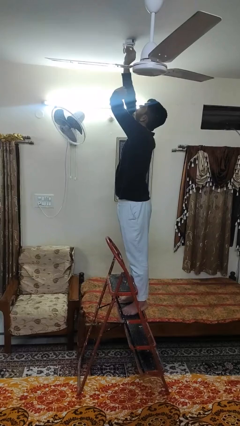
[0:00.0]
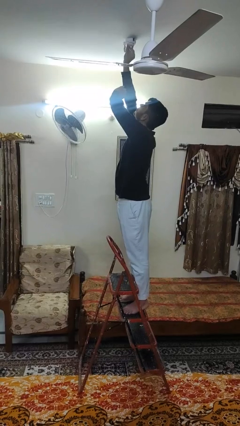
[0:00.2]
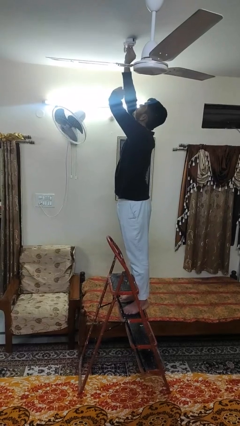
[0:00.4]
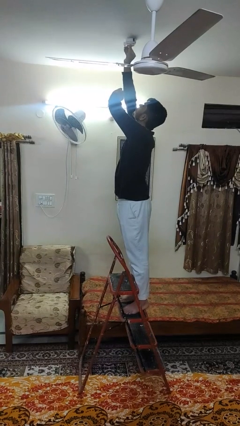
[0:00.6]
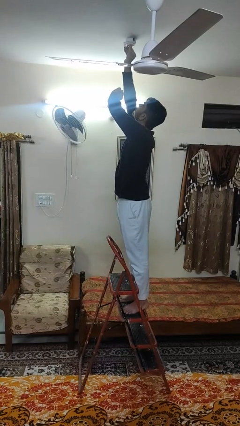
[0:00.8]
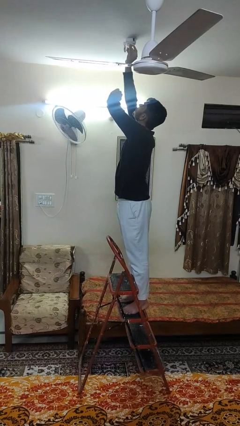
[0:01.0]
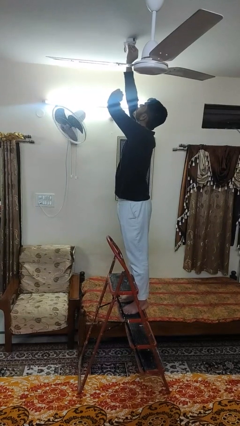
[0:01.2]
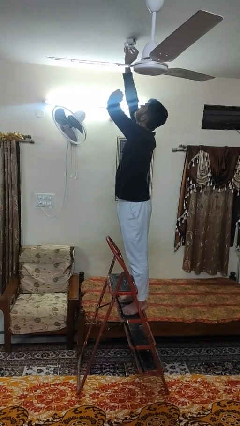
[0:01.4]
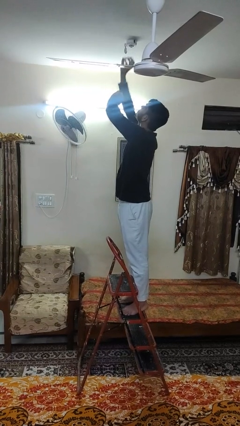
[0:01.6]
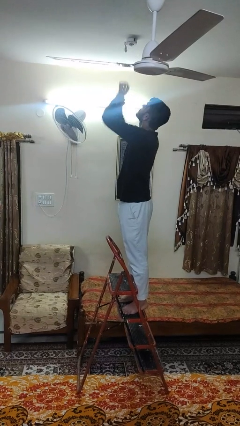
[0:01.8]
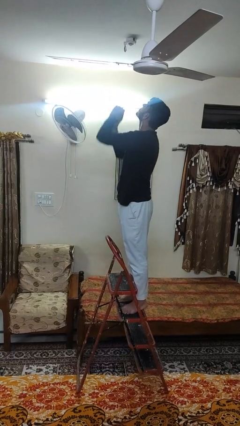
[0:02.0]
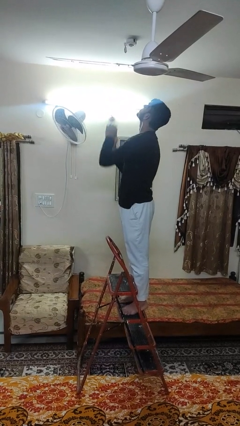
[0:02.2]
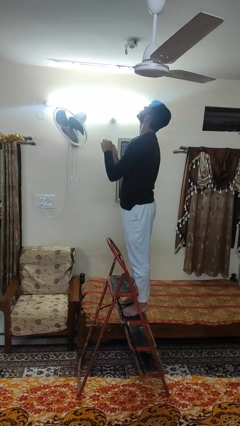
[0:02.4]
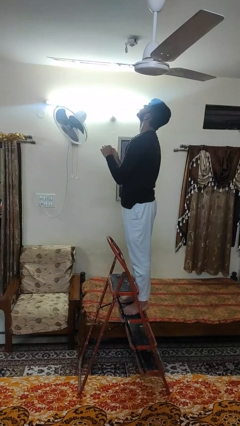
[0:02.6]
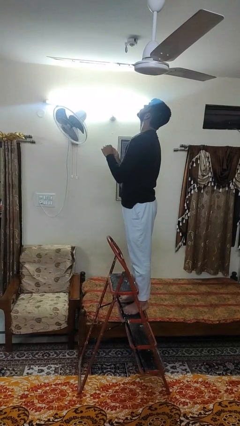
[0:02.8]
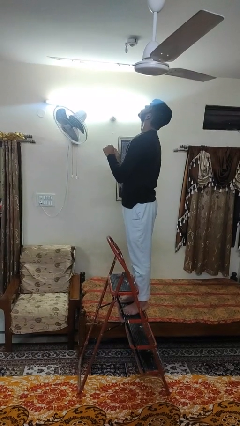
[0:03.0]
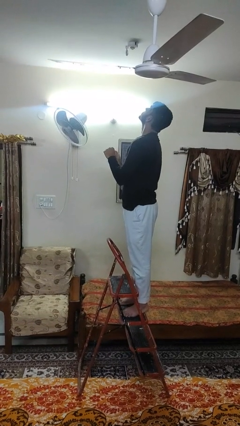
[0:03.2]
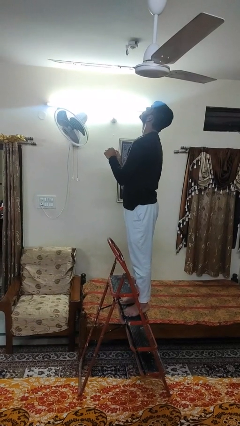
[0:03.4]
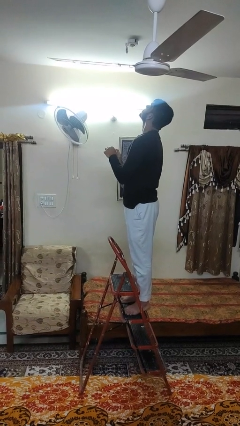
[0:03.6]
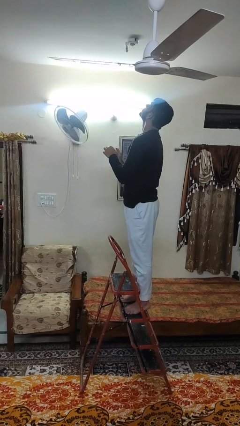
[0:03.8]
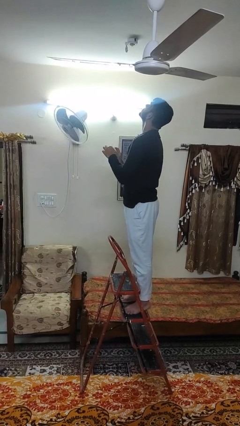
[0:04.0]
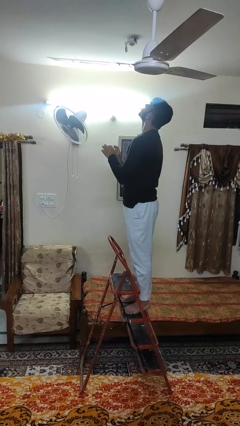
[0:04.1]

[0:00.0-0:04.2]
person takes down smoke detector

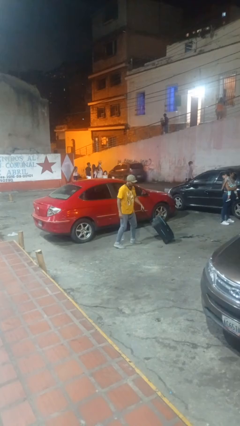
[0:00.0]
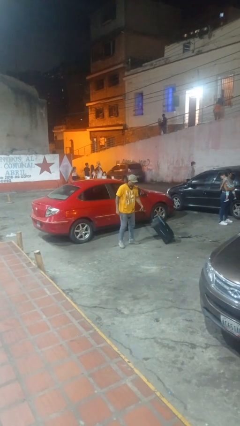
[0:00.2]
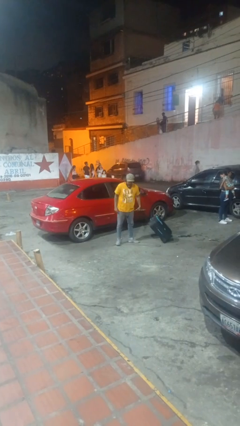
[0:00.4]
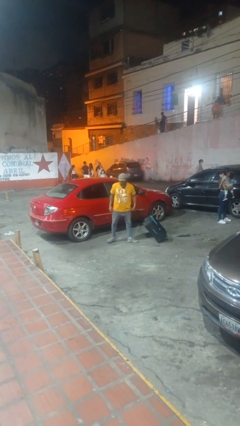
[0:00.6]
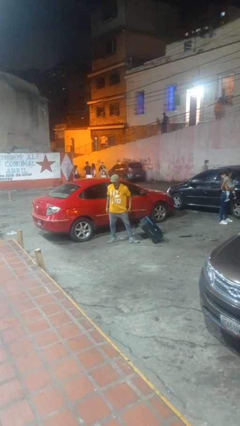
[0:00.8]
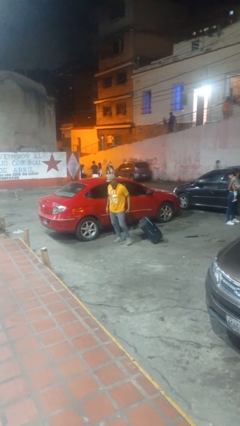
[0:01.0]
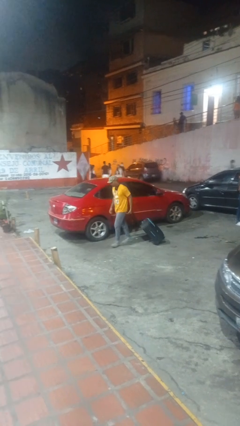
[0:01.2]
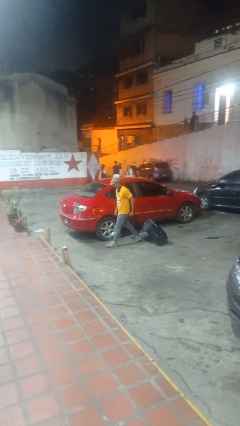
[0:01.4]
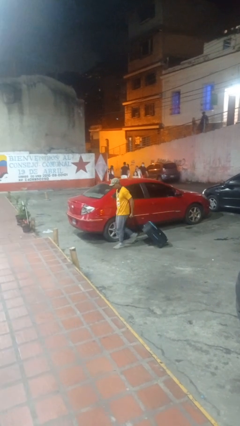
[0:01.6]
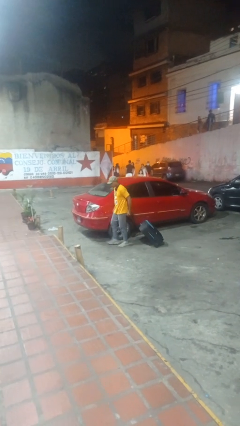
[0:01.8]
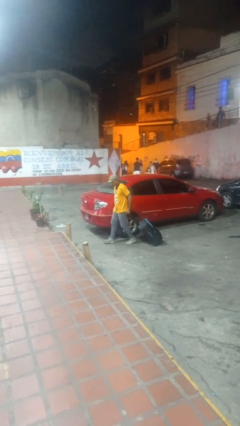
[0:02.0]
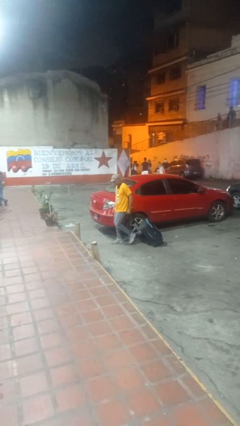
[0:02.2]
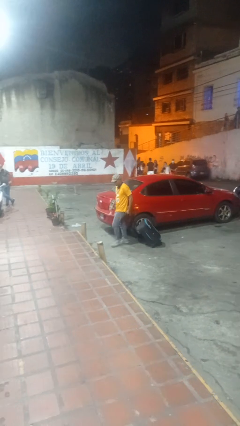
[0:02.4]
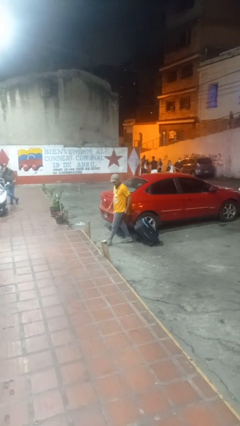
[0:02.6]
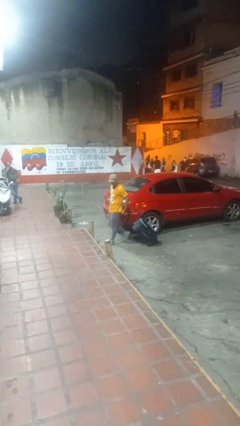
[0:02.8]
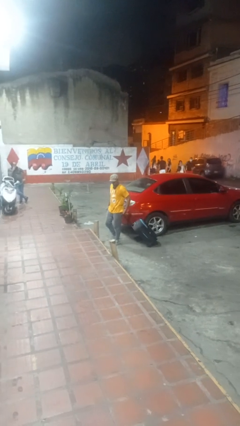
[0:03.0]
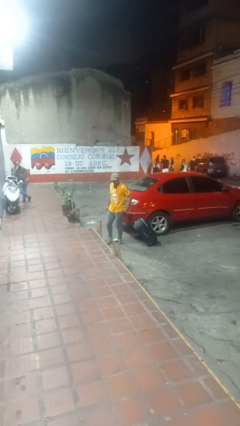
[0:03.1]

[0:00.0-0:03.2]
person pulls wheeled cart

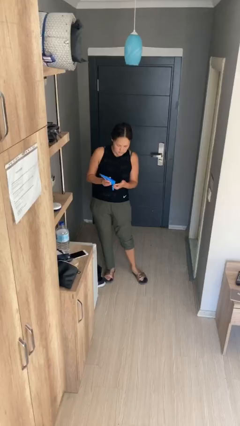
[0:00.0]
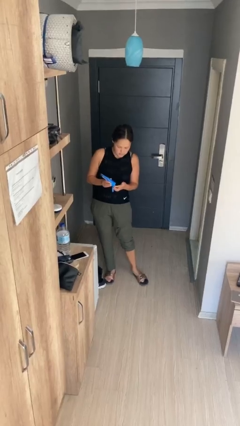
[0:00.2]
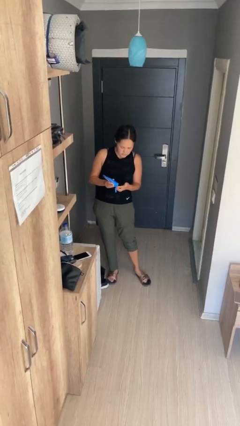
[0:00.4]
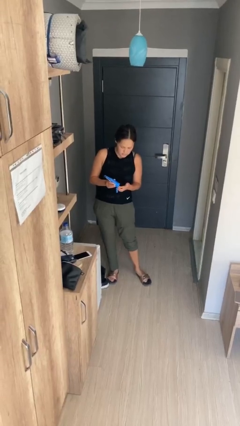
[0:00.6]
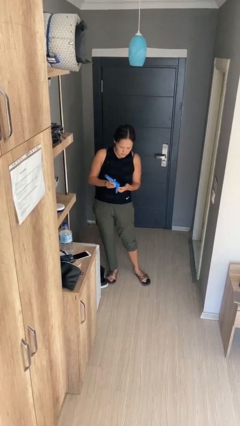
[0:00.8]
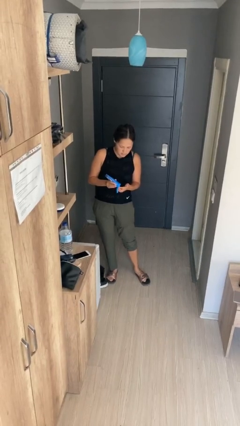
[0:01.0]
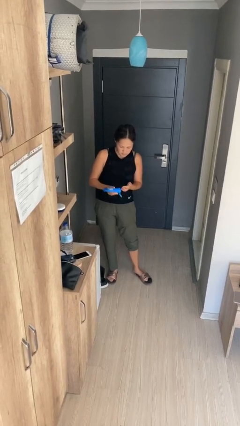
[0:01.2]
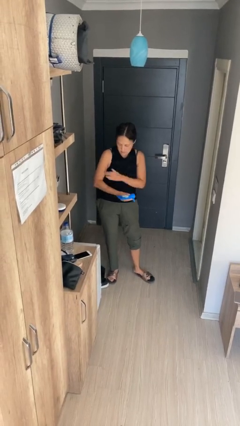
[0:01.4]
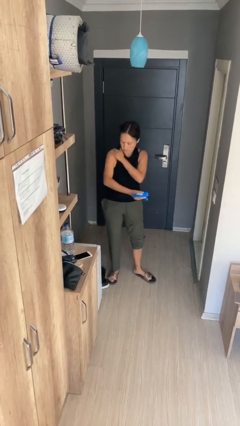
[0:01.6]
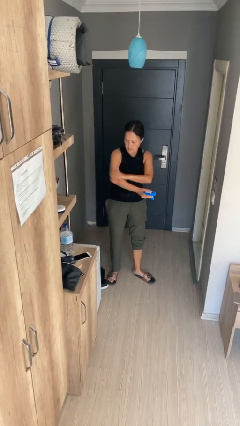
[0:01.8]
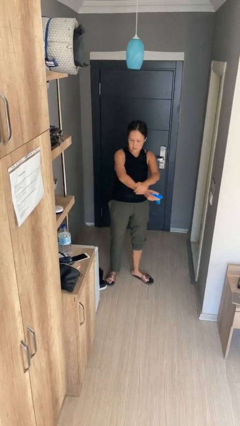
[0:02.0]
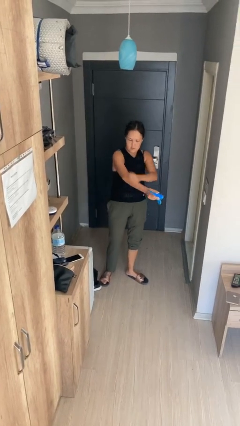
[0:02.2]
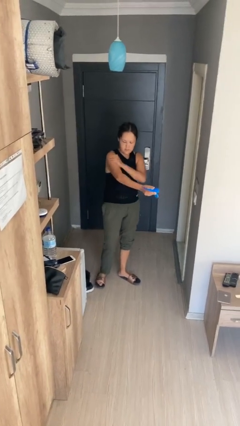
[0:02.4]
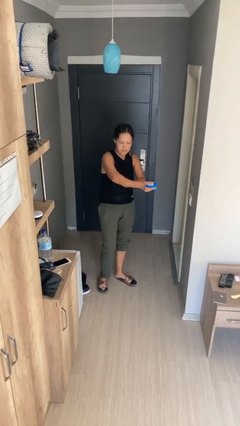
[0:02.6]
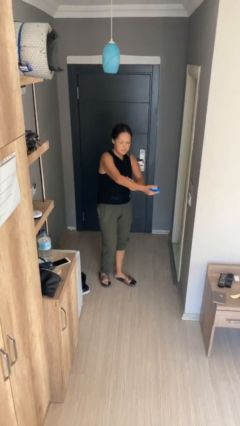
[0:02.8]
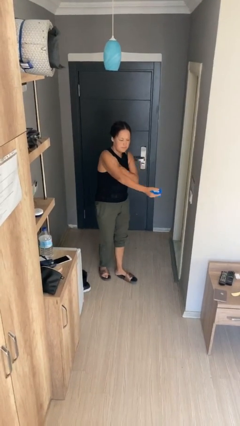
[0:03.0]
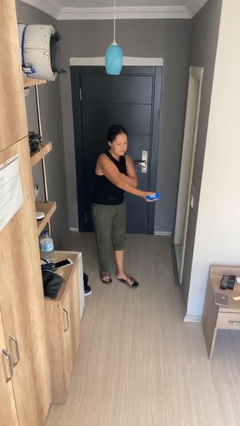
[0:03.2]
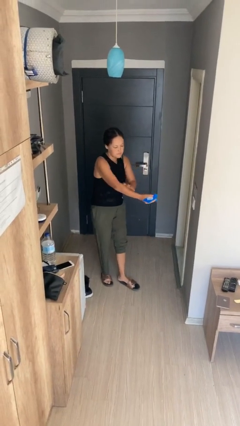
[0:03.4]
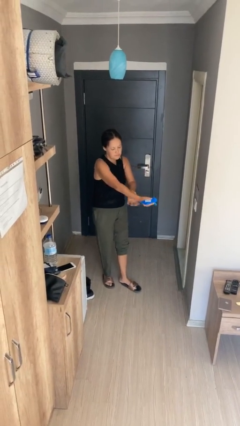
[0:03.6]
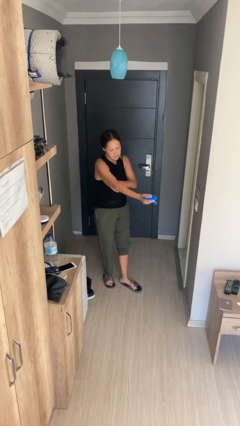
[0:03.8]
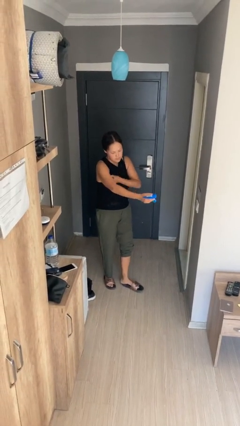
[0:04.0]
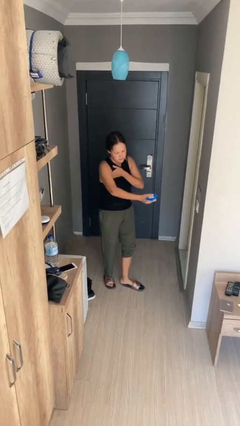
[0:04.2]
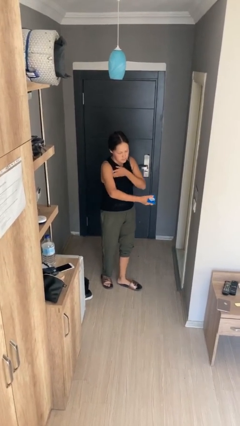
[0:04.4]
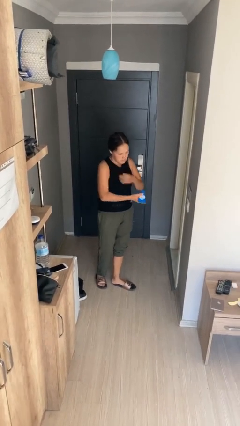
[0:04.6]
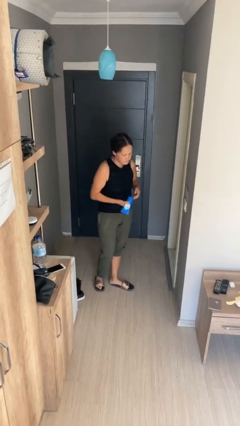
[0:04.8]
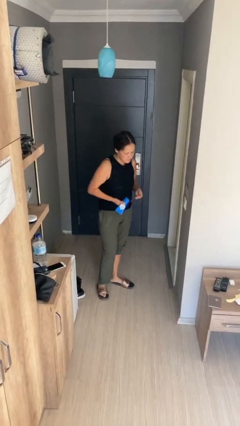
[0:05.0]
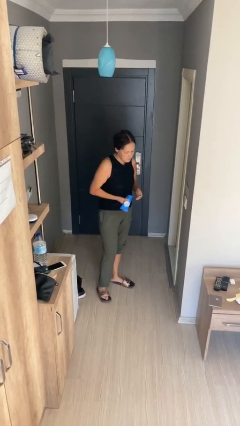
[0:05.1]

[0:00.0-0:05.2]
person applies sunscreen

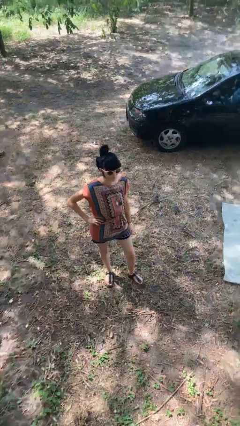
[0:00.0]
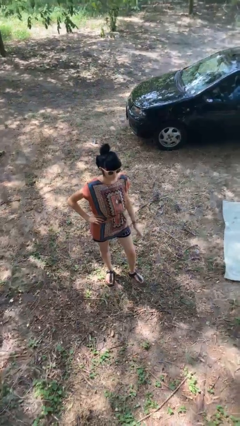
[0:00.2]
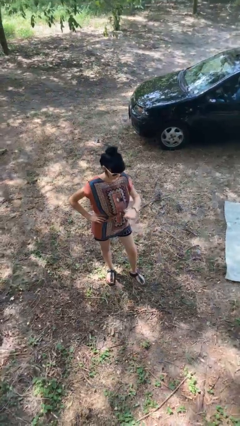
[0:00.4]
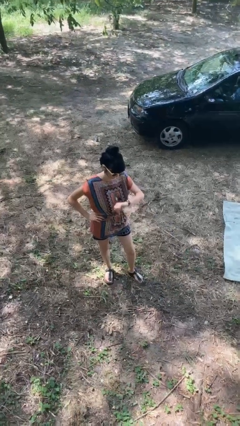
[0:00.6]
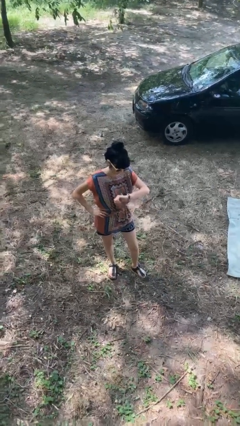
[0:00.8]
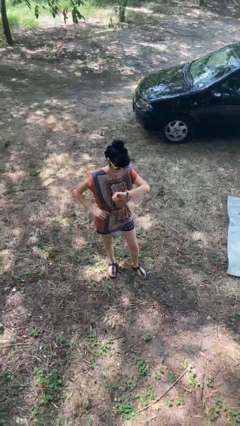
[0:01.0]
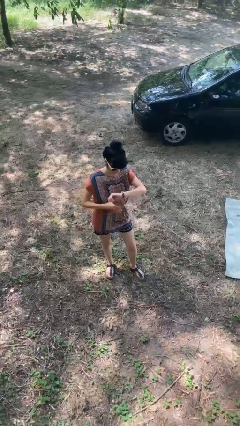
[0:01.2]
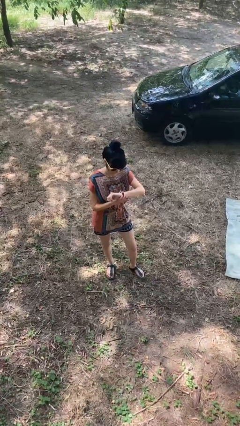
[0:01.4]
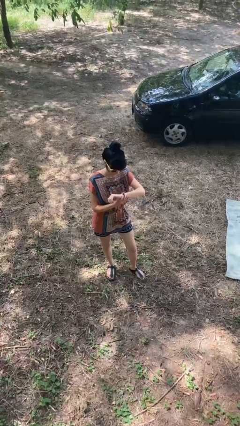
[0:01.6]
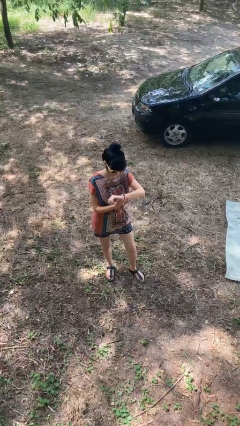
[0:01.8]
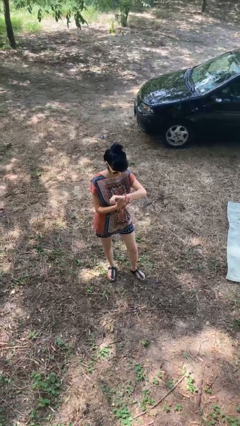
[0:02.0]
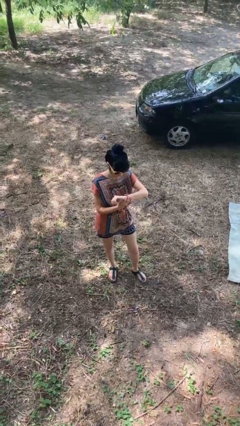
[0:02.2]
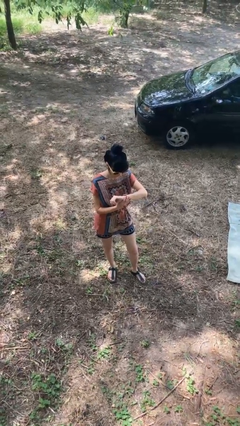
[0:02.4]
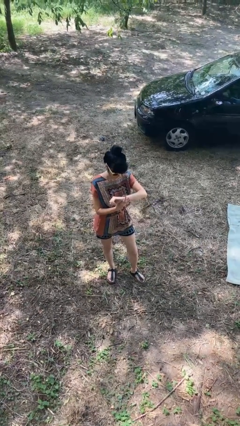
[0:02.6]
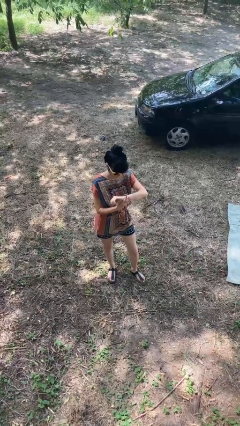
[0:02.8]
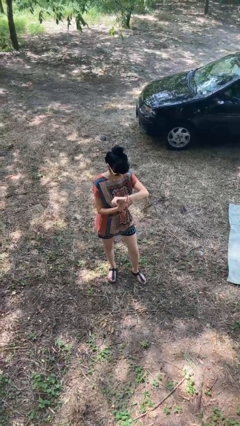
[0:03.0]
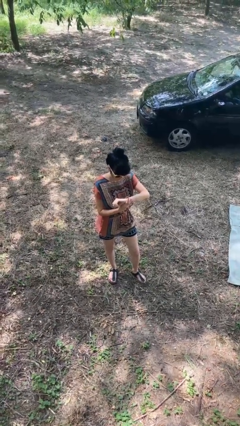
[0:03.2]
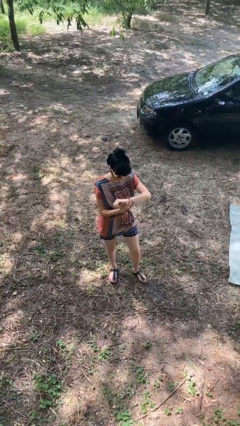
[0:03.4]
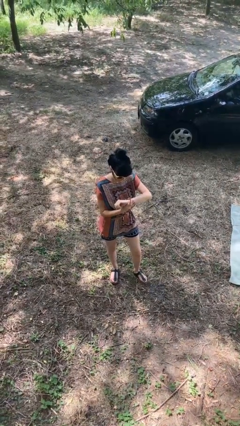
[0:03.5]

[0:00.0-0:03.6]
person looks at wristwatch

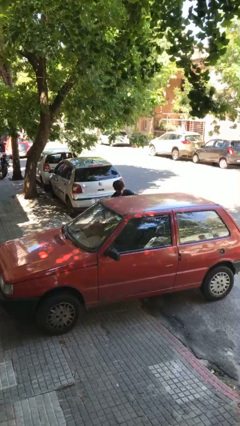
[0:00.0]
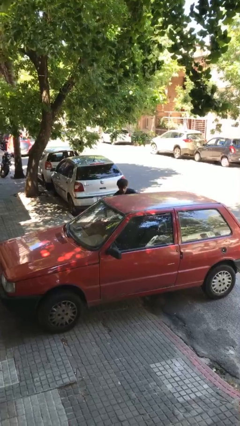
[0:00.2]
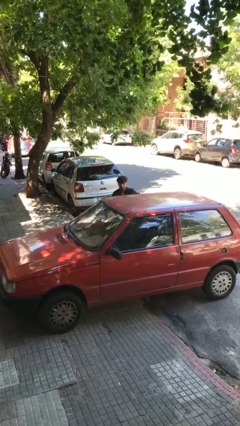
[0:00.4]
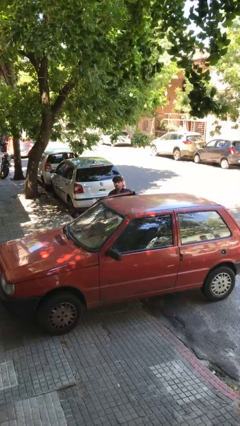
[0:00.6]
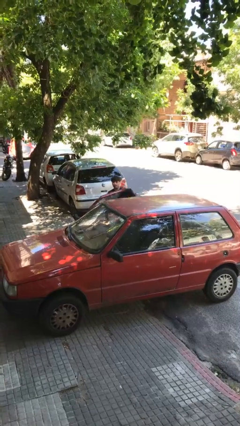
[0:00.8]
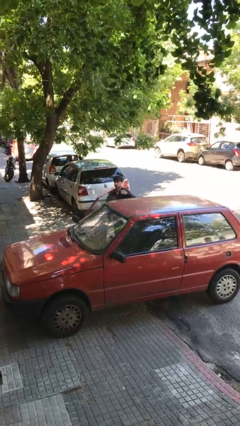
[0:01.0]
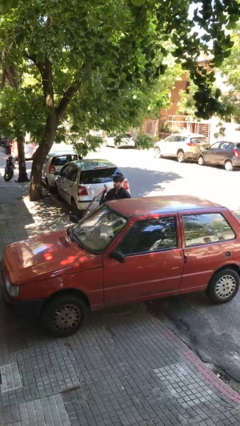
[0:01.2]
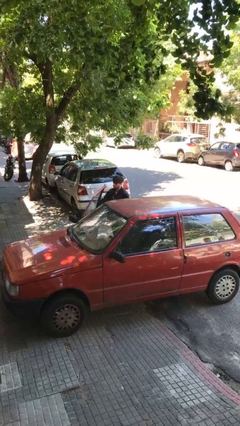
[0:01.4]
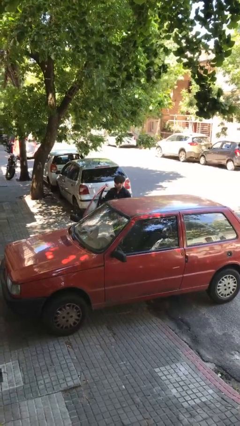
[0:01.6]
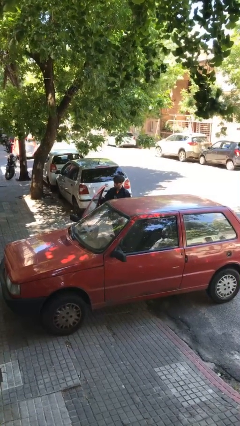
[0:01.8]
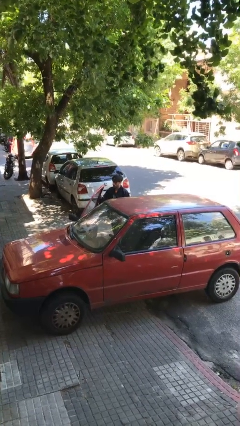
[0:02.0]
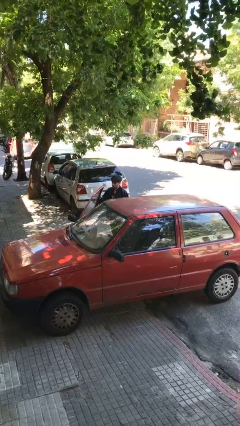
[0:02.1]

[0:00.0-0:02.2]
person opens car door
